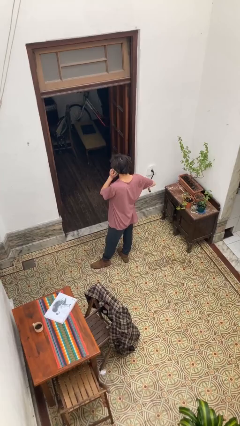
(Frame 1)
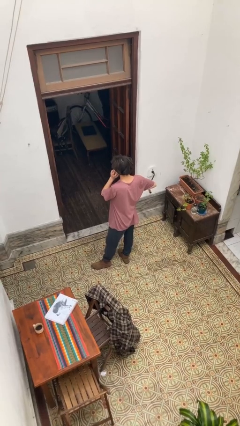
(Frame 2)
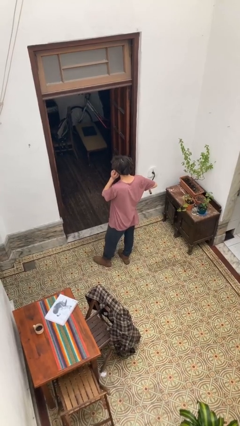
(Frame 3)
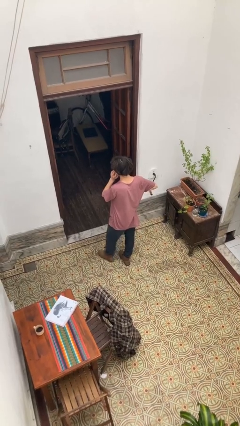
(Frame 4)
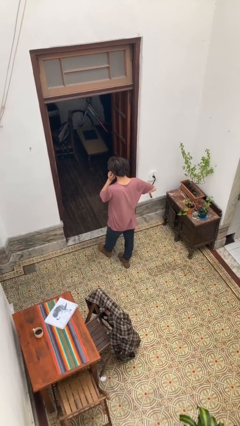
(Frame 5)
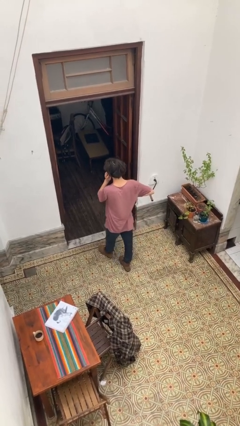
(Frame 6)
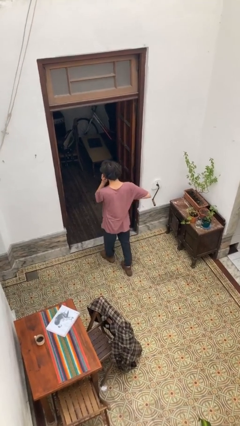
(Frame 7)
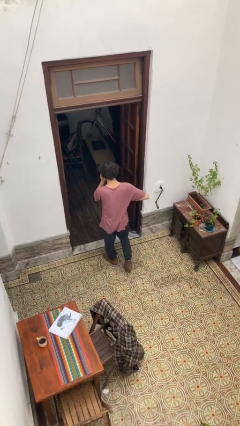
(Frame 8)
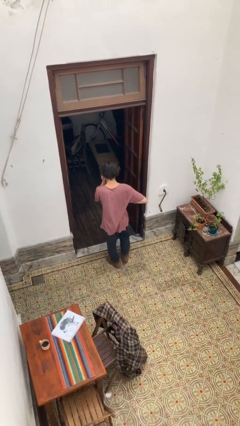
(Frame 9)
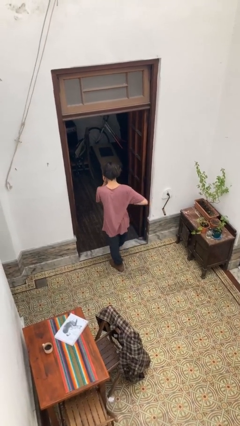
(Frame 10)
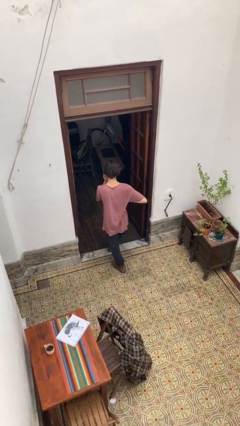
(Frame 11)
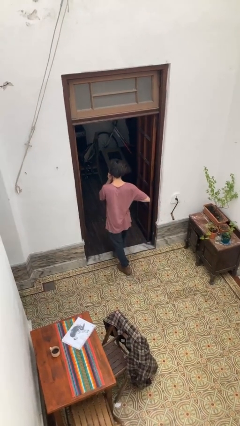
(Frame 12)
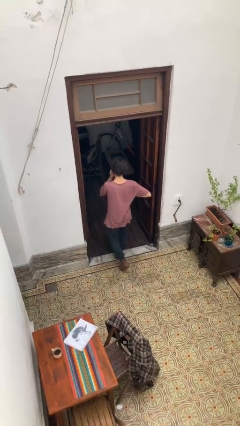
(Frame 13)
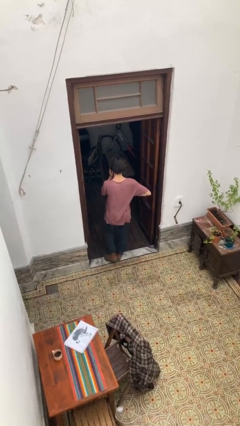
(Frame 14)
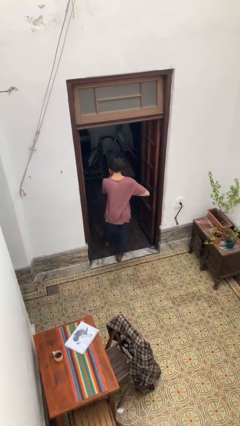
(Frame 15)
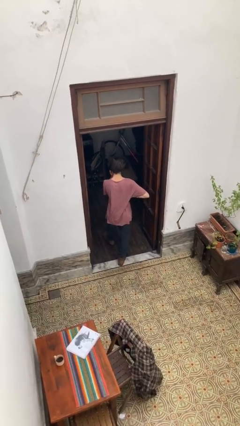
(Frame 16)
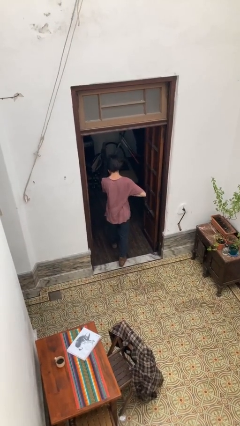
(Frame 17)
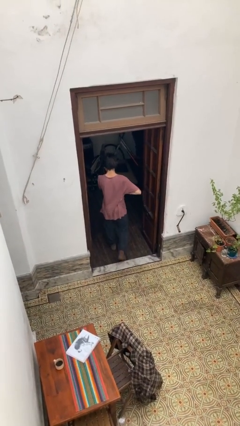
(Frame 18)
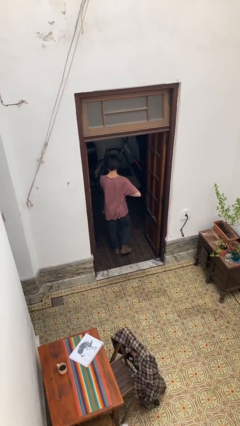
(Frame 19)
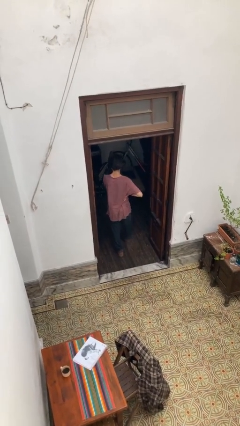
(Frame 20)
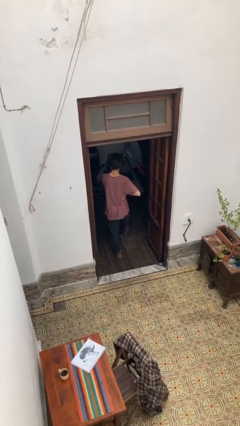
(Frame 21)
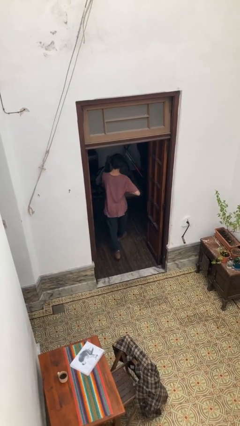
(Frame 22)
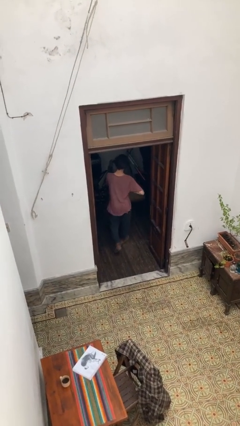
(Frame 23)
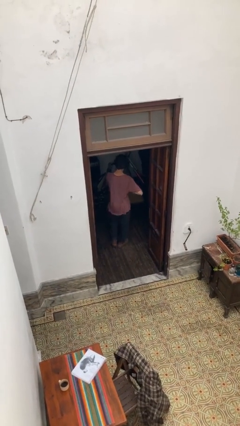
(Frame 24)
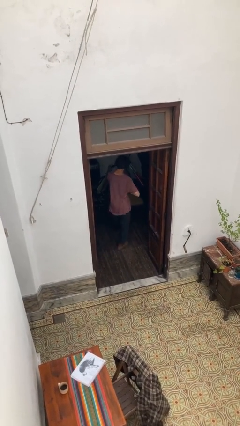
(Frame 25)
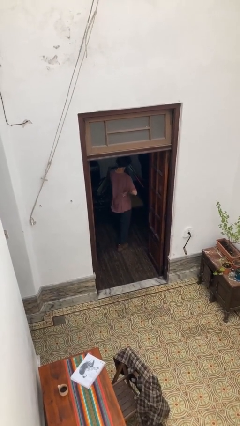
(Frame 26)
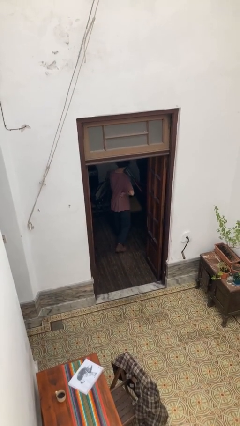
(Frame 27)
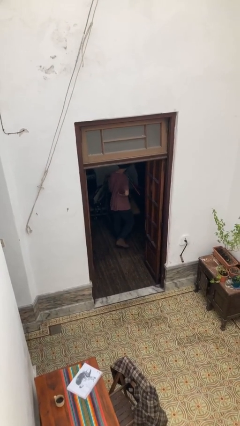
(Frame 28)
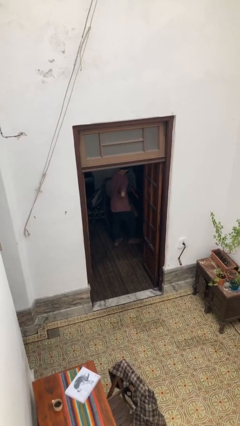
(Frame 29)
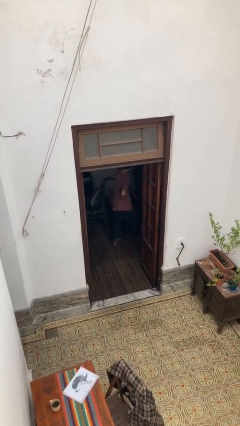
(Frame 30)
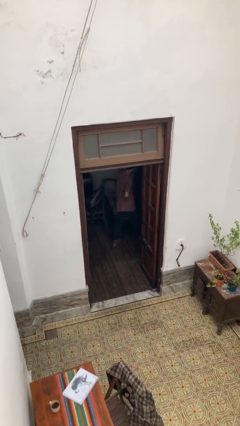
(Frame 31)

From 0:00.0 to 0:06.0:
person exits scene through structure

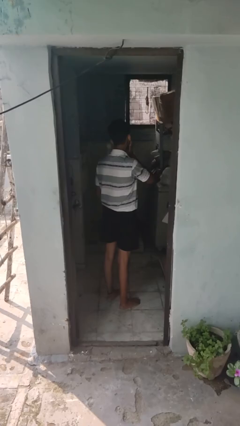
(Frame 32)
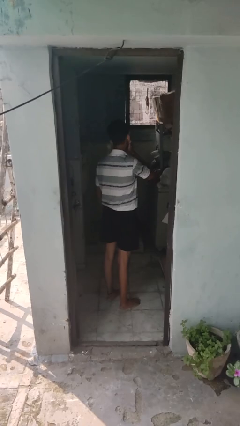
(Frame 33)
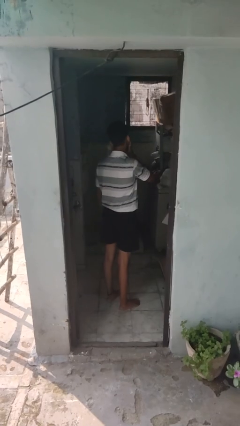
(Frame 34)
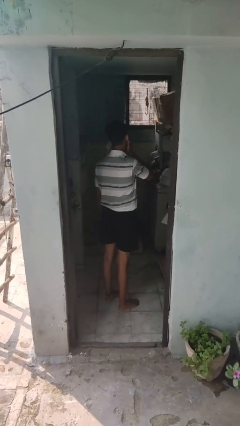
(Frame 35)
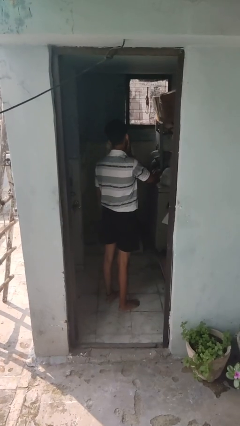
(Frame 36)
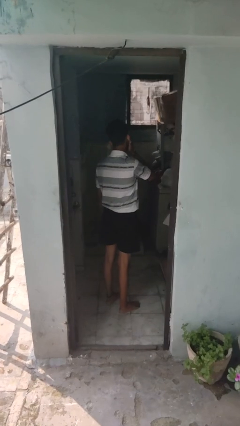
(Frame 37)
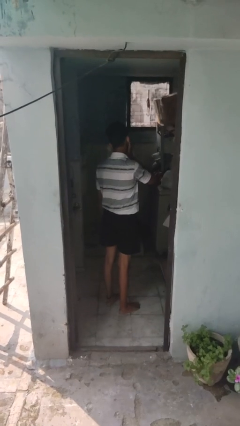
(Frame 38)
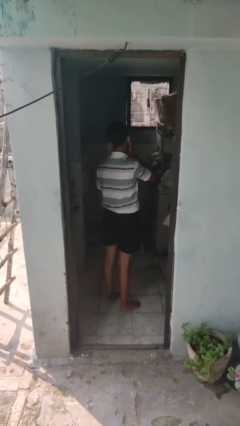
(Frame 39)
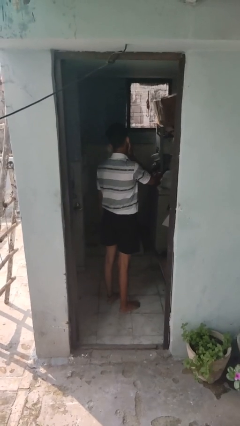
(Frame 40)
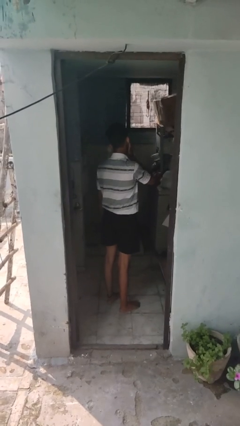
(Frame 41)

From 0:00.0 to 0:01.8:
person applies shaving cream

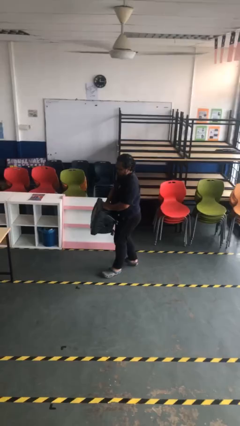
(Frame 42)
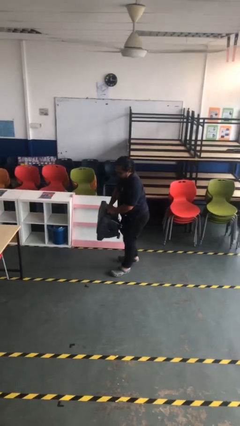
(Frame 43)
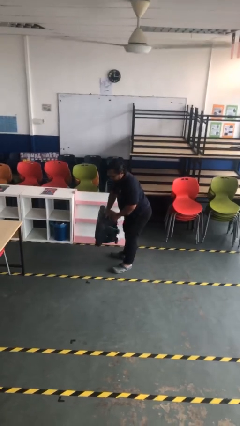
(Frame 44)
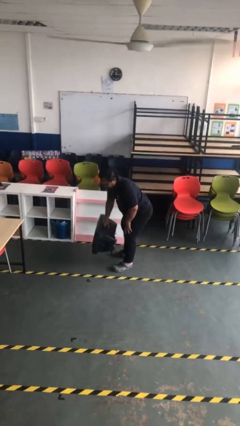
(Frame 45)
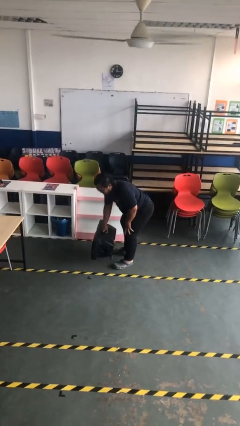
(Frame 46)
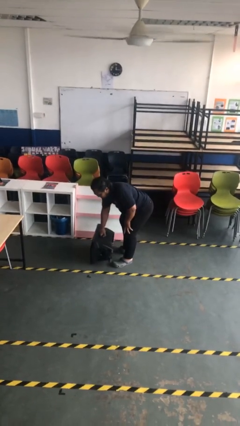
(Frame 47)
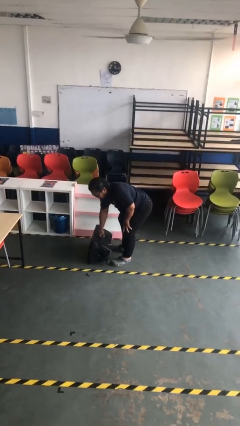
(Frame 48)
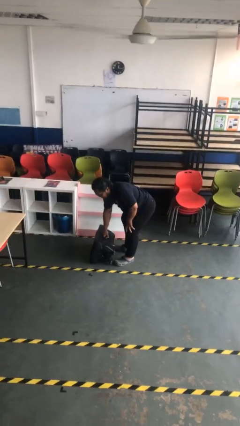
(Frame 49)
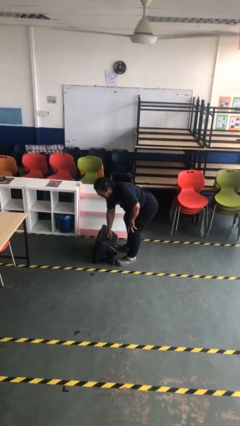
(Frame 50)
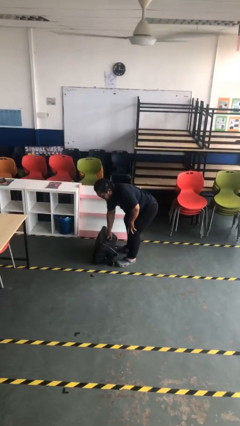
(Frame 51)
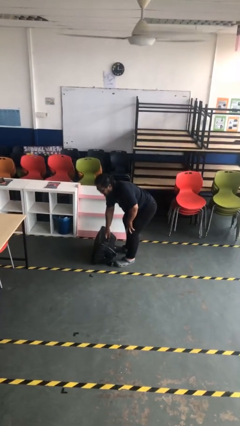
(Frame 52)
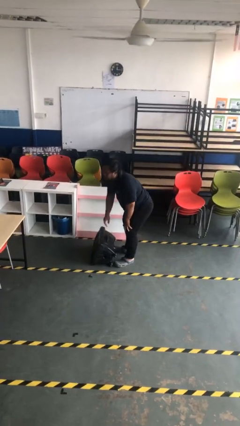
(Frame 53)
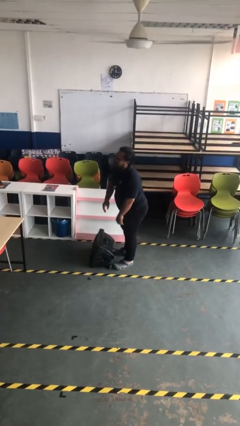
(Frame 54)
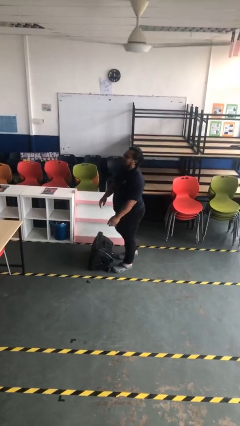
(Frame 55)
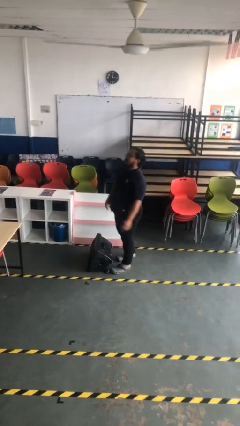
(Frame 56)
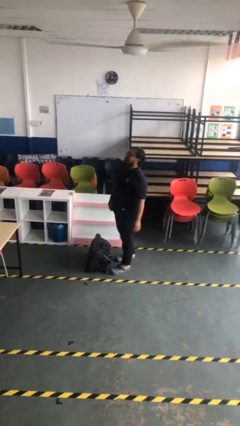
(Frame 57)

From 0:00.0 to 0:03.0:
person puts down object on floor

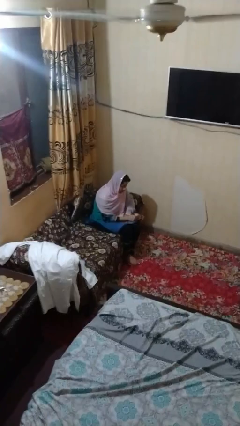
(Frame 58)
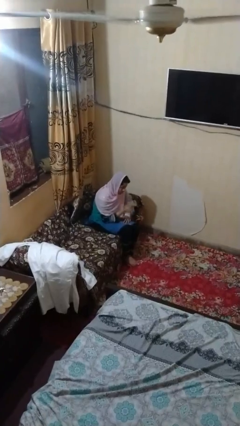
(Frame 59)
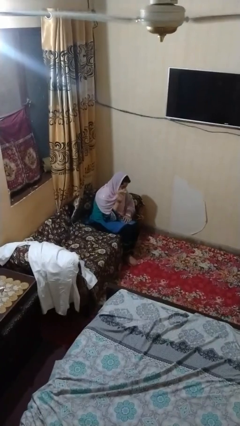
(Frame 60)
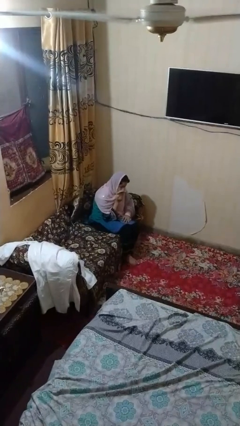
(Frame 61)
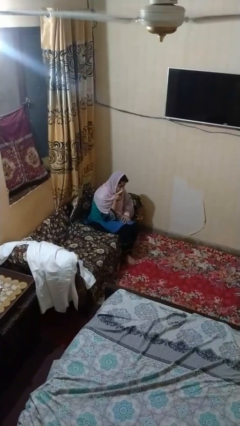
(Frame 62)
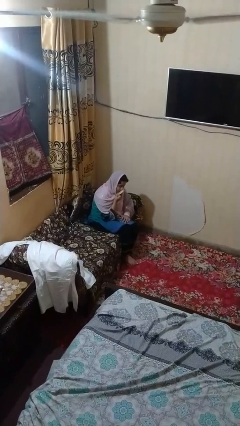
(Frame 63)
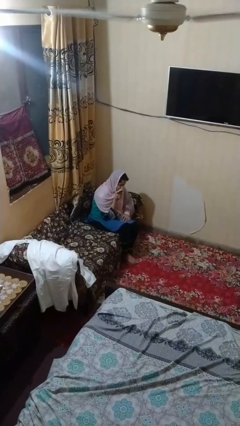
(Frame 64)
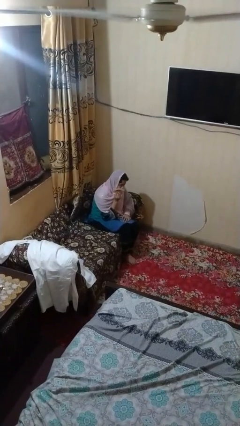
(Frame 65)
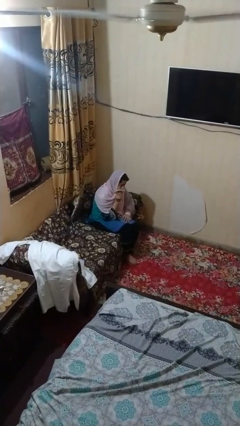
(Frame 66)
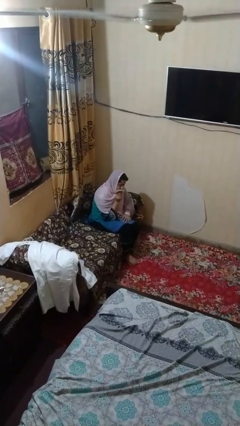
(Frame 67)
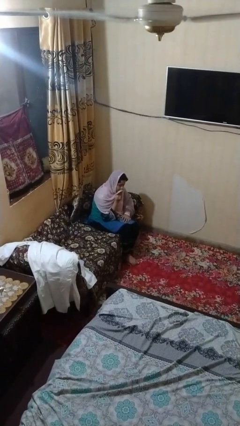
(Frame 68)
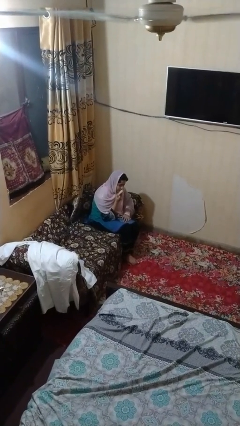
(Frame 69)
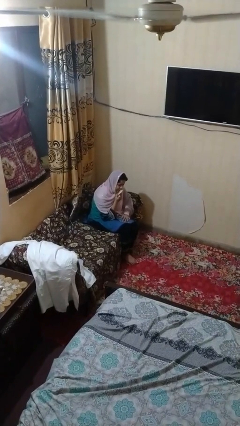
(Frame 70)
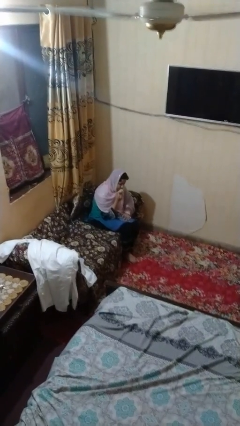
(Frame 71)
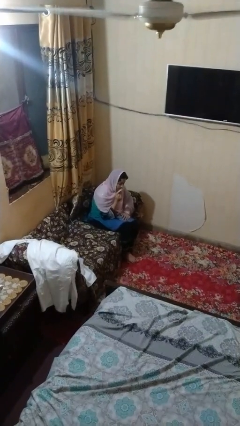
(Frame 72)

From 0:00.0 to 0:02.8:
person wipes mouth with napkin

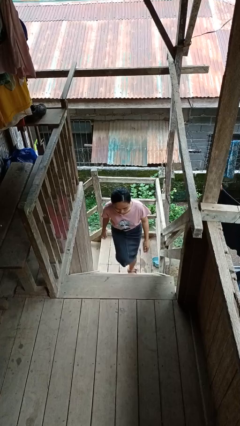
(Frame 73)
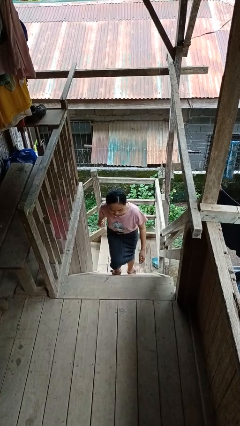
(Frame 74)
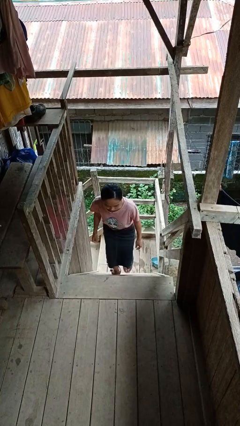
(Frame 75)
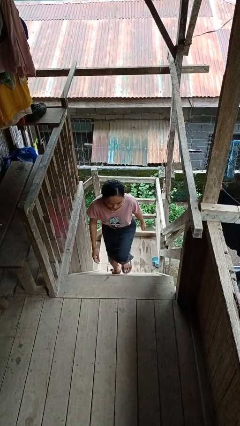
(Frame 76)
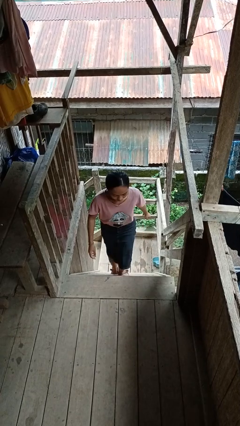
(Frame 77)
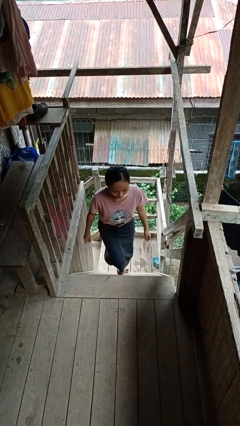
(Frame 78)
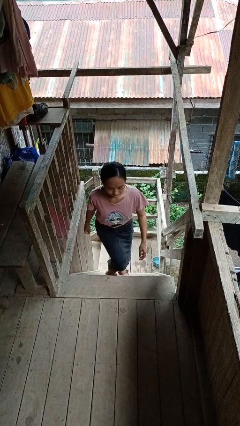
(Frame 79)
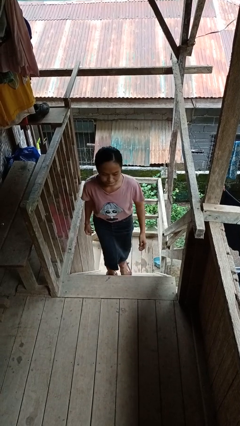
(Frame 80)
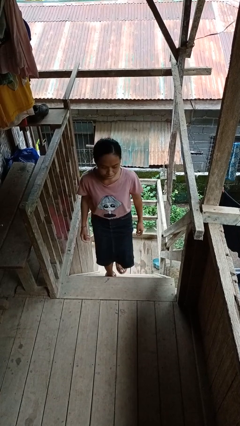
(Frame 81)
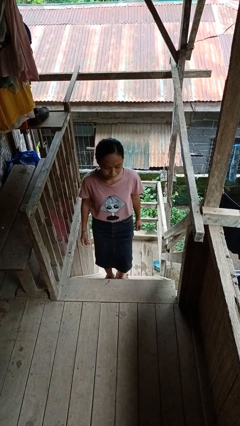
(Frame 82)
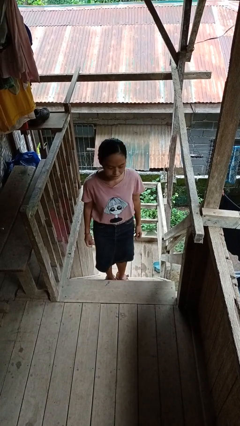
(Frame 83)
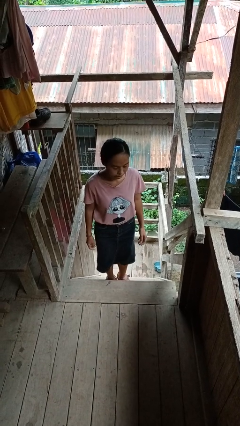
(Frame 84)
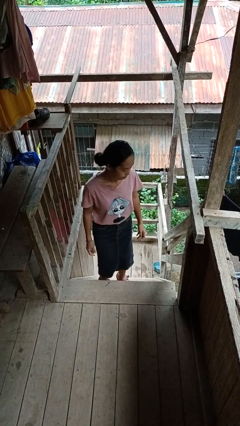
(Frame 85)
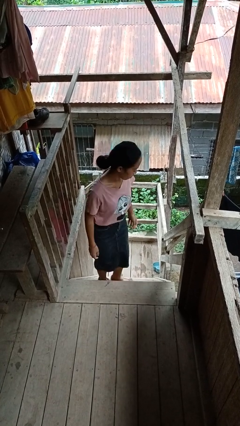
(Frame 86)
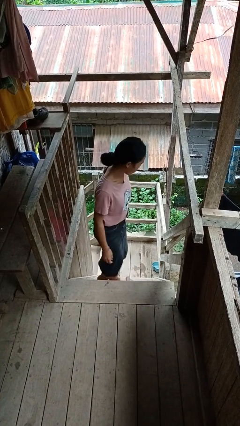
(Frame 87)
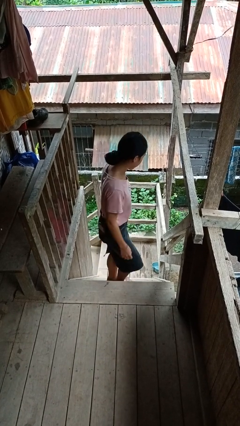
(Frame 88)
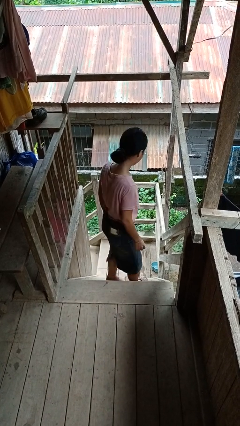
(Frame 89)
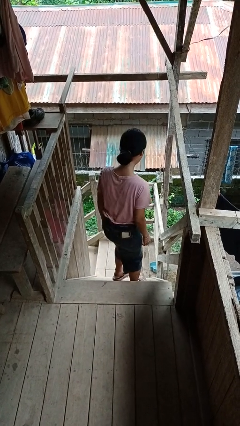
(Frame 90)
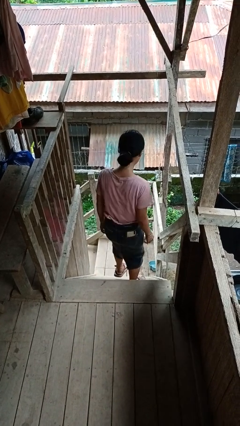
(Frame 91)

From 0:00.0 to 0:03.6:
person climbs up stairs

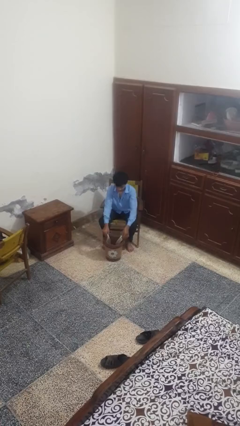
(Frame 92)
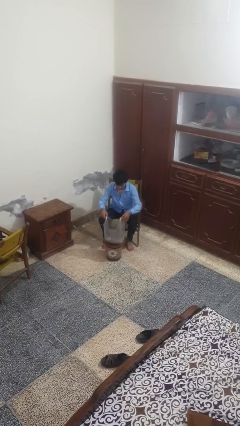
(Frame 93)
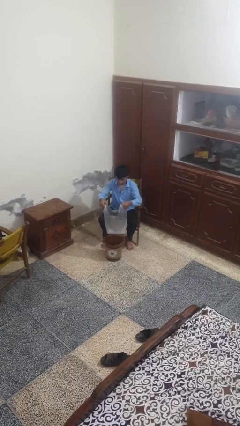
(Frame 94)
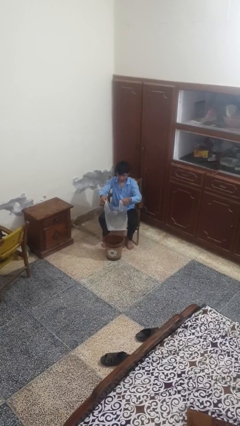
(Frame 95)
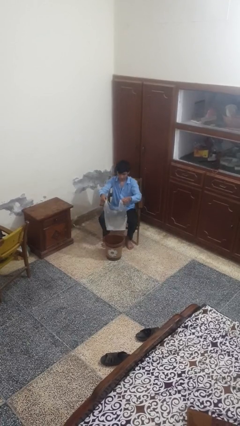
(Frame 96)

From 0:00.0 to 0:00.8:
person removes trashbag from trashcan
